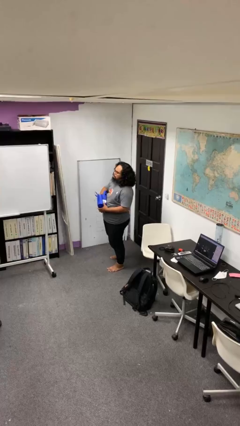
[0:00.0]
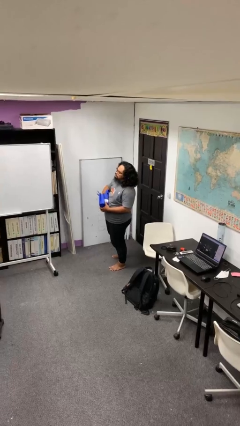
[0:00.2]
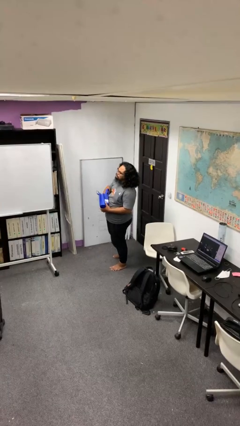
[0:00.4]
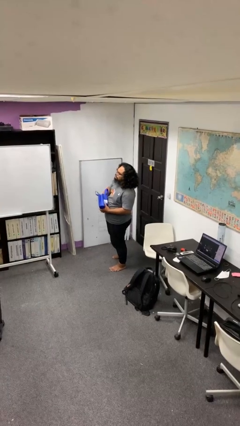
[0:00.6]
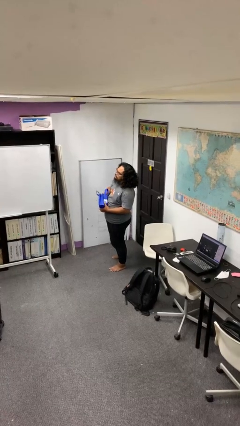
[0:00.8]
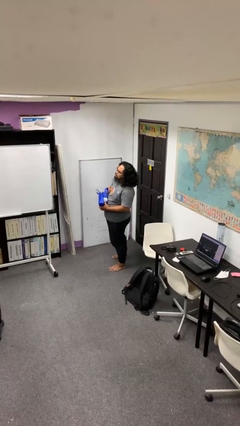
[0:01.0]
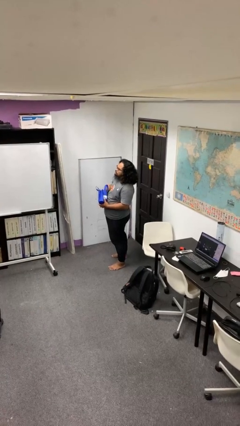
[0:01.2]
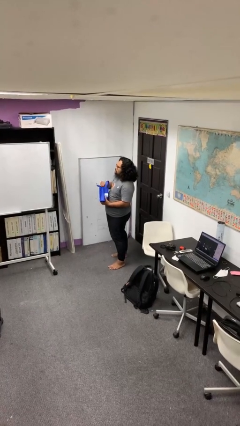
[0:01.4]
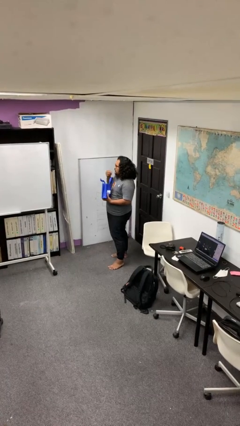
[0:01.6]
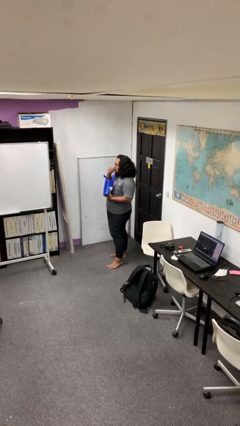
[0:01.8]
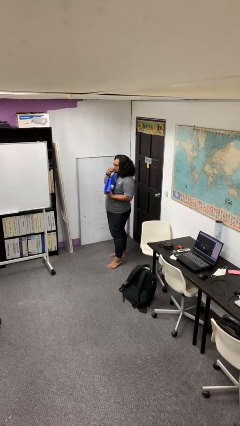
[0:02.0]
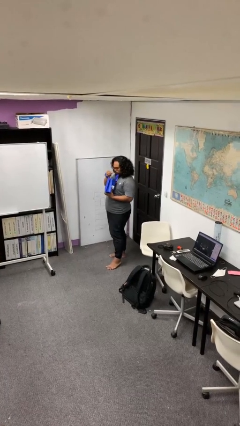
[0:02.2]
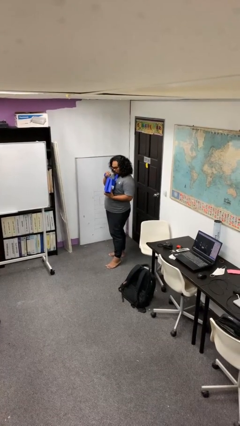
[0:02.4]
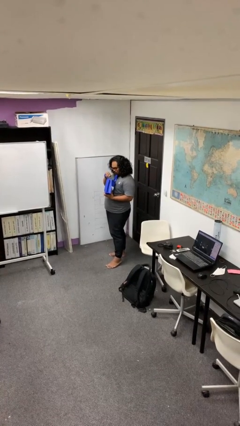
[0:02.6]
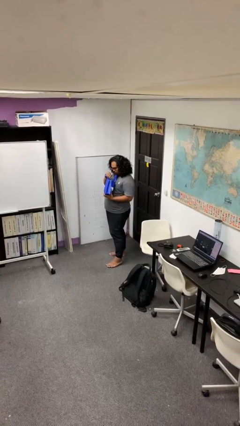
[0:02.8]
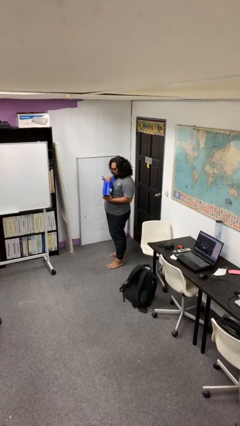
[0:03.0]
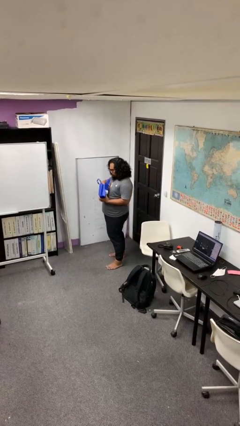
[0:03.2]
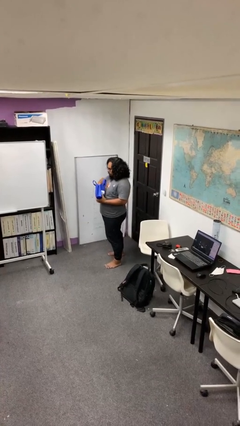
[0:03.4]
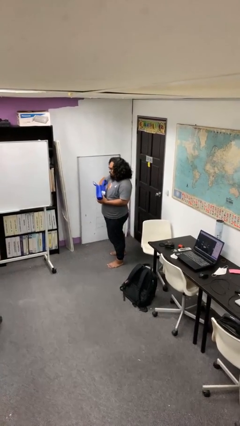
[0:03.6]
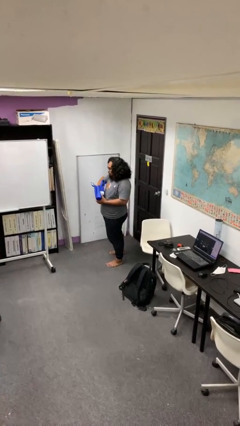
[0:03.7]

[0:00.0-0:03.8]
person eats snack from bag

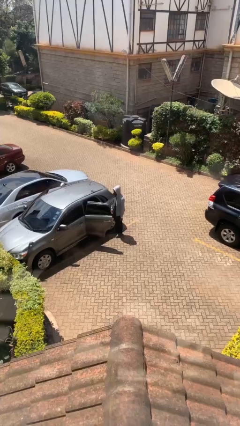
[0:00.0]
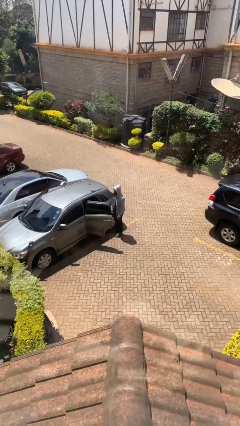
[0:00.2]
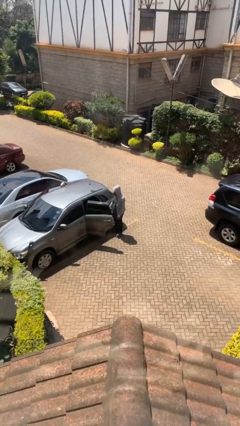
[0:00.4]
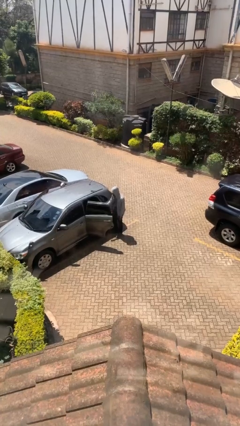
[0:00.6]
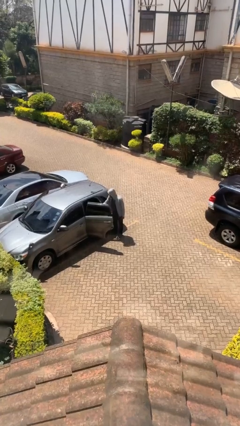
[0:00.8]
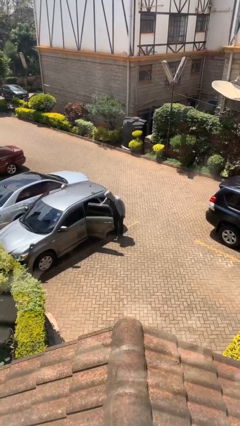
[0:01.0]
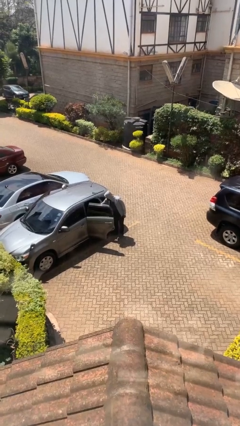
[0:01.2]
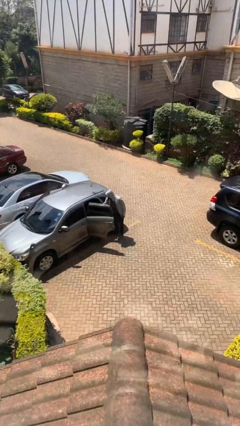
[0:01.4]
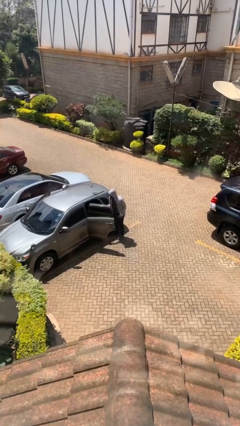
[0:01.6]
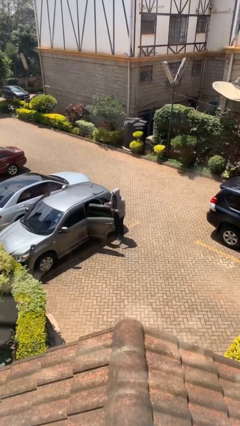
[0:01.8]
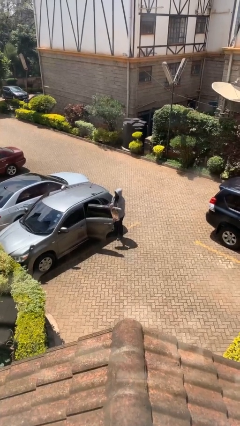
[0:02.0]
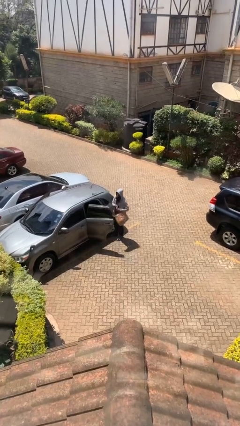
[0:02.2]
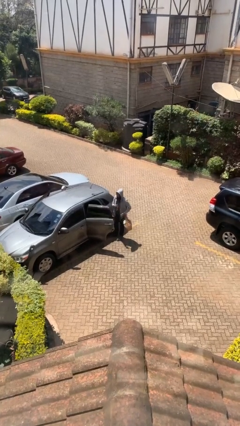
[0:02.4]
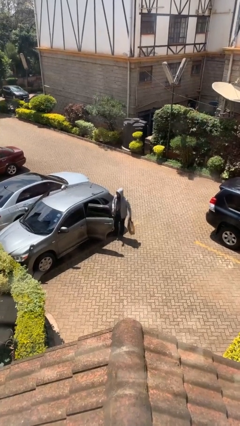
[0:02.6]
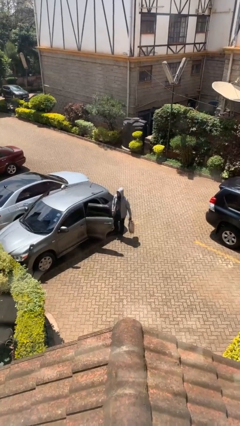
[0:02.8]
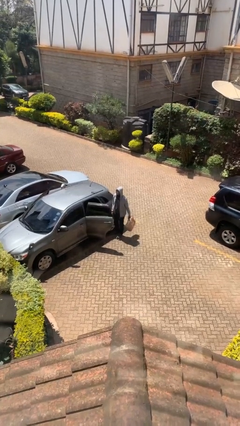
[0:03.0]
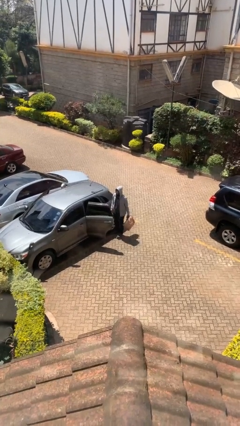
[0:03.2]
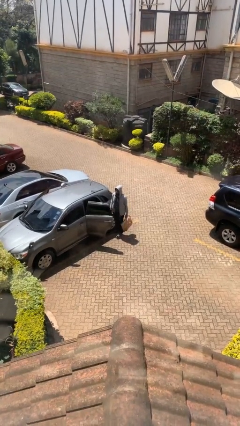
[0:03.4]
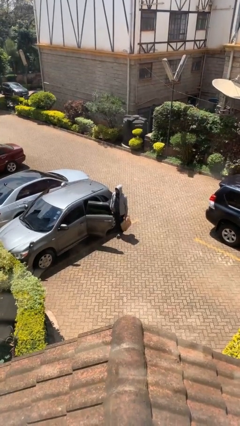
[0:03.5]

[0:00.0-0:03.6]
person unloads car

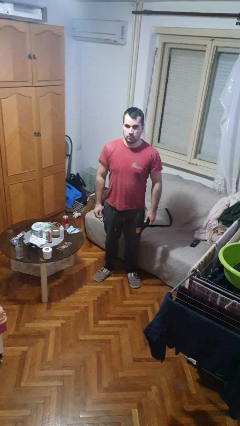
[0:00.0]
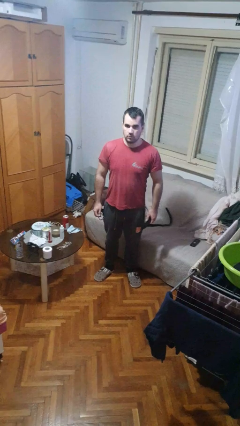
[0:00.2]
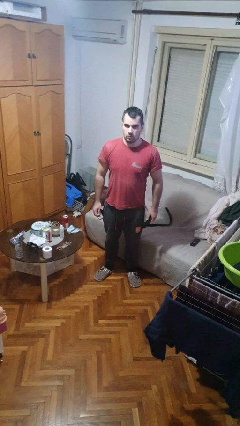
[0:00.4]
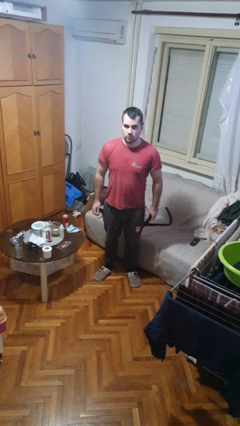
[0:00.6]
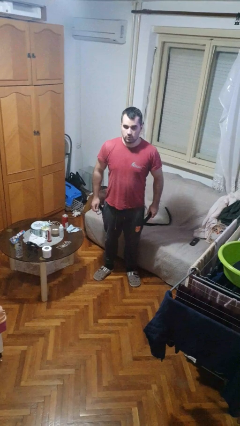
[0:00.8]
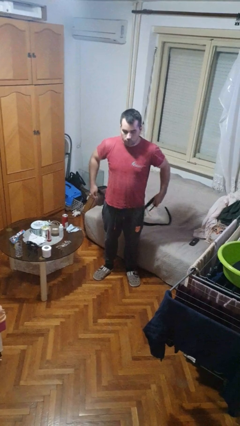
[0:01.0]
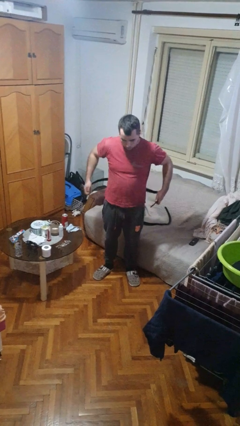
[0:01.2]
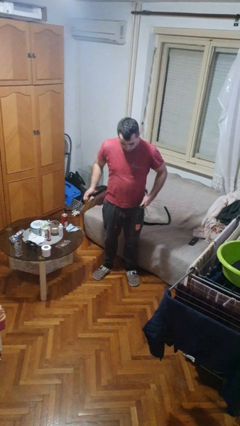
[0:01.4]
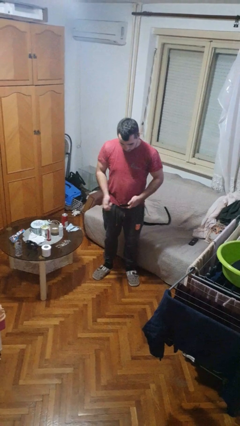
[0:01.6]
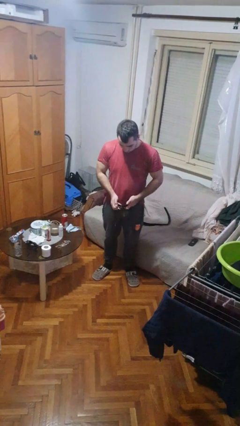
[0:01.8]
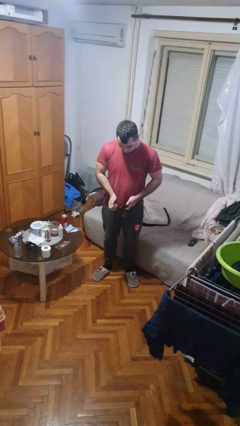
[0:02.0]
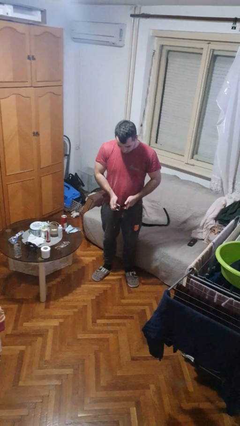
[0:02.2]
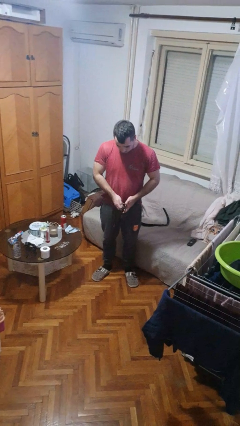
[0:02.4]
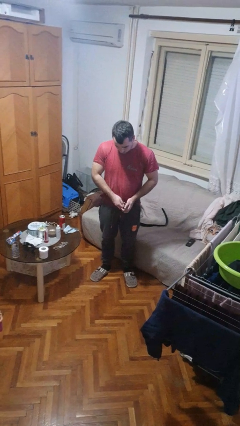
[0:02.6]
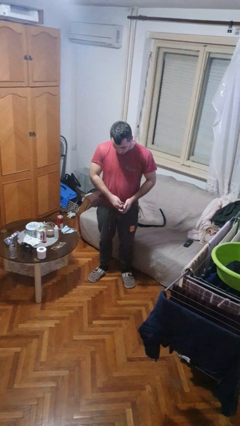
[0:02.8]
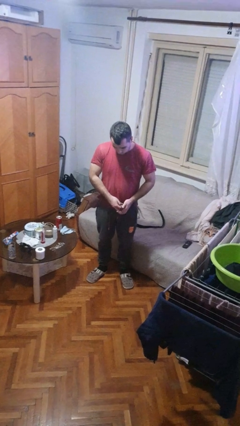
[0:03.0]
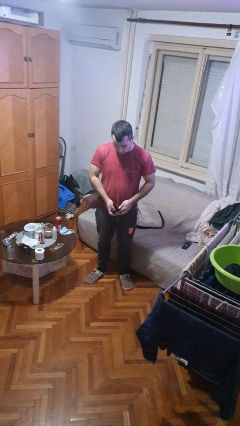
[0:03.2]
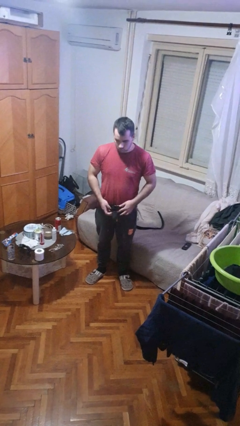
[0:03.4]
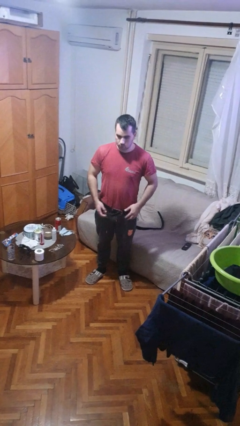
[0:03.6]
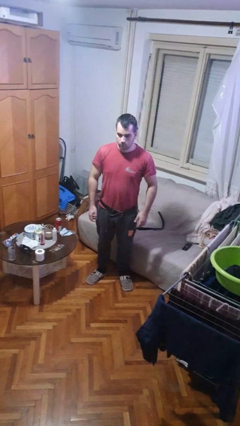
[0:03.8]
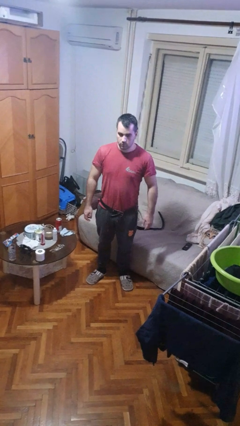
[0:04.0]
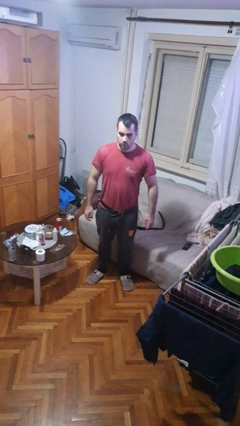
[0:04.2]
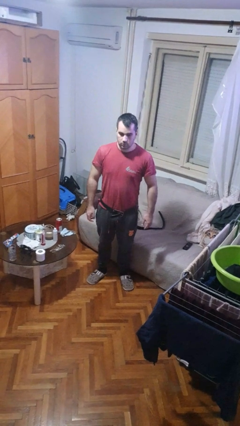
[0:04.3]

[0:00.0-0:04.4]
person puts on belt

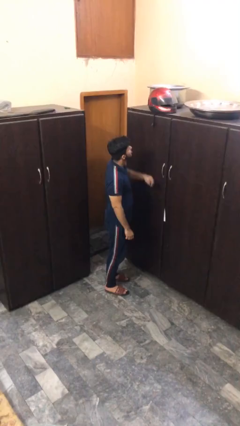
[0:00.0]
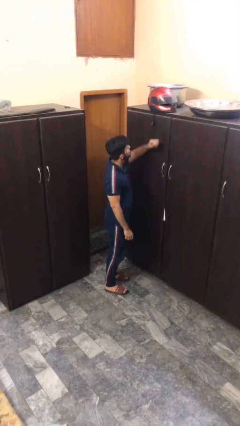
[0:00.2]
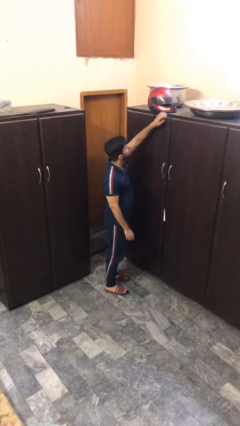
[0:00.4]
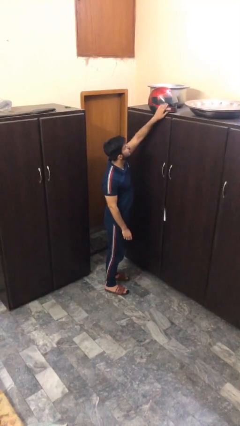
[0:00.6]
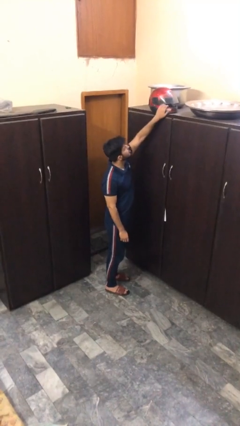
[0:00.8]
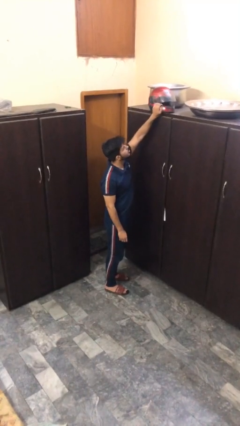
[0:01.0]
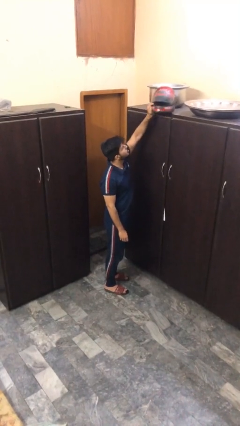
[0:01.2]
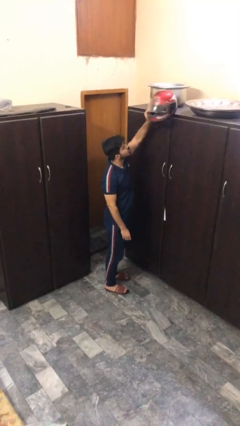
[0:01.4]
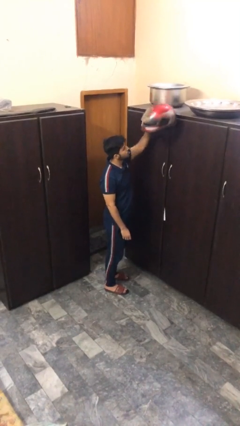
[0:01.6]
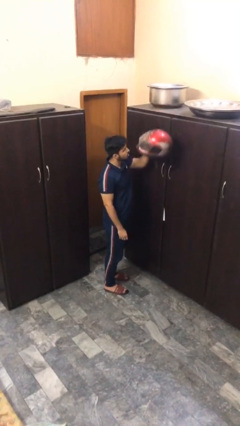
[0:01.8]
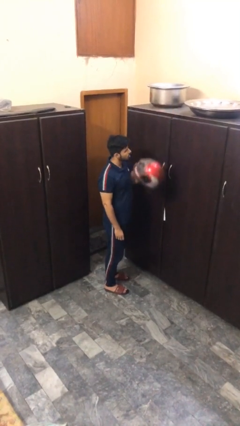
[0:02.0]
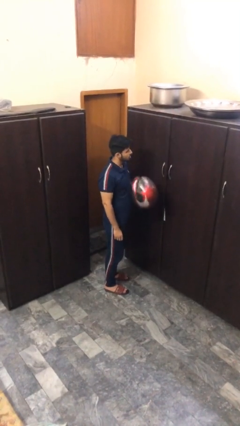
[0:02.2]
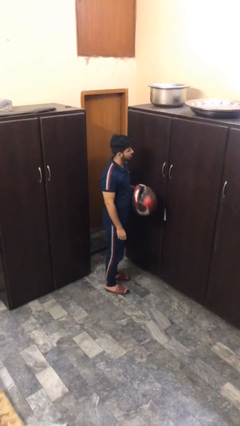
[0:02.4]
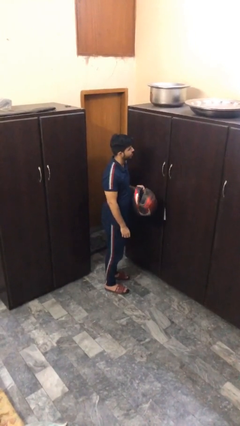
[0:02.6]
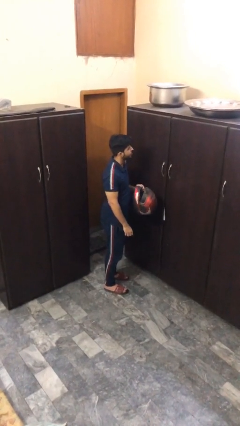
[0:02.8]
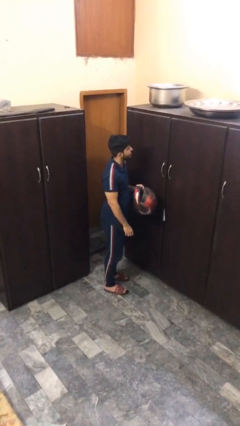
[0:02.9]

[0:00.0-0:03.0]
person picks up object from shelf

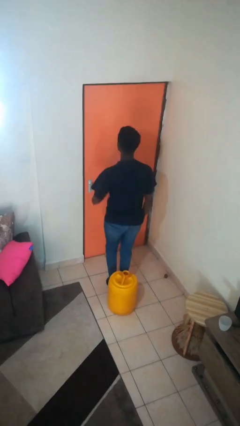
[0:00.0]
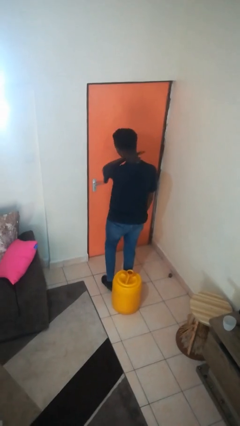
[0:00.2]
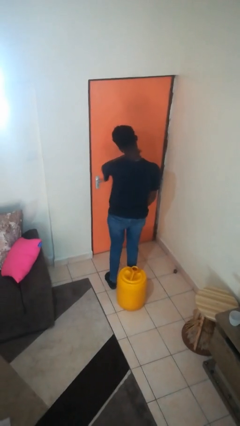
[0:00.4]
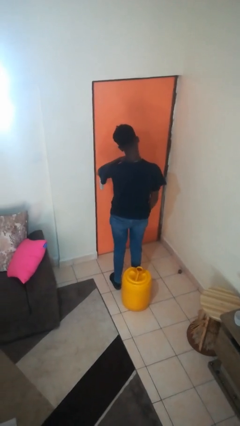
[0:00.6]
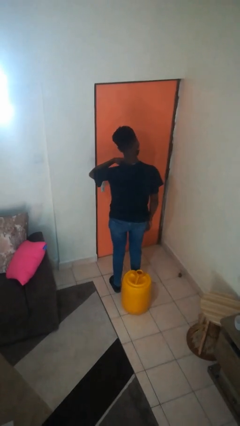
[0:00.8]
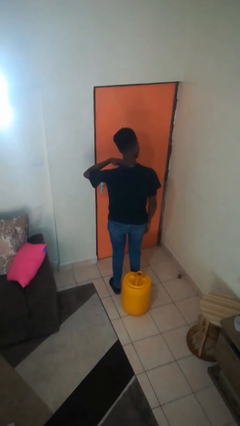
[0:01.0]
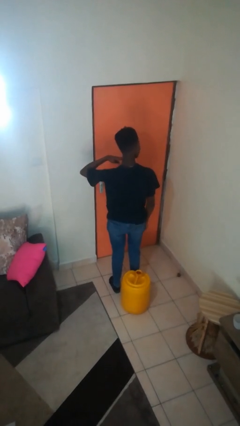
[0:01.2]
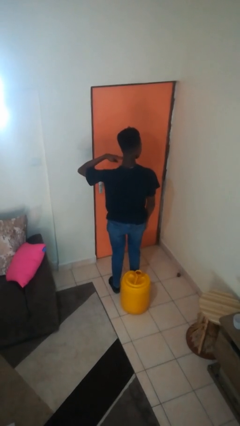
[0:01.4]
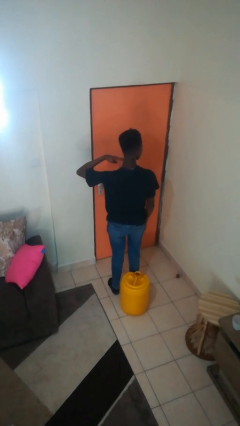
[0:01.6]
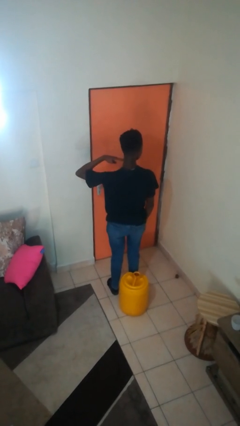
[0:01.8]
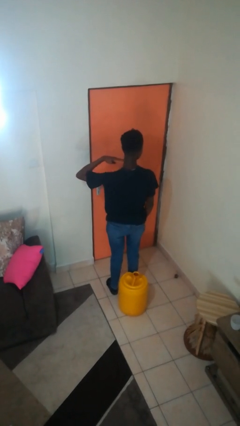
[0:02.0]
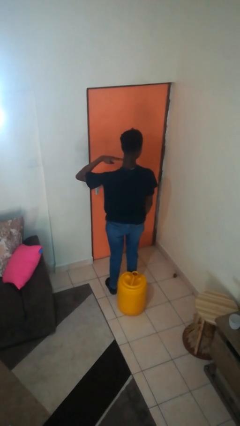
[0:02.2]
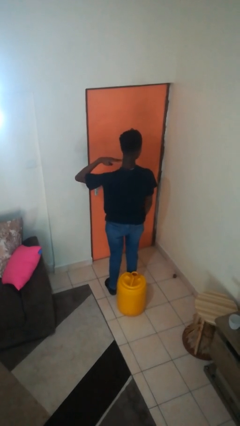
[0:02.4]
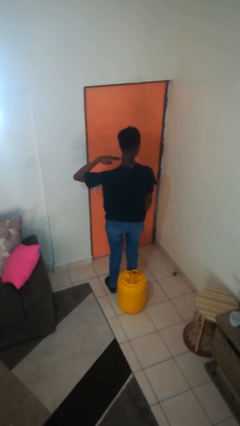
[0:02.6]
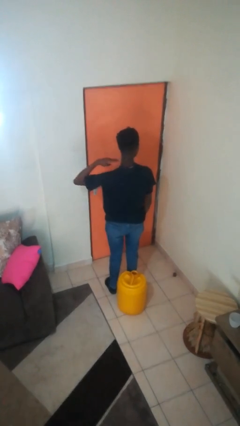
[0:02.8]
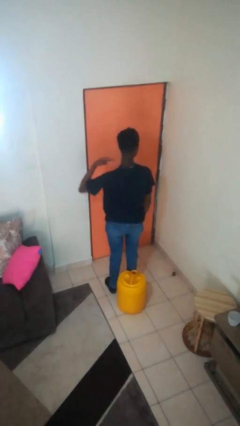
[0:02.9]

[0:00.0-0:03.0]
person gestures cut
